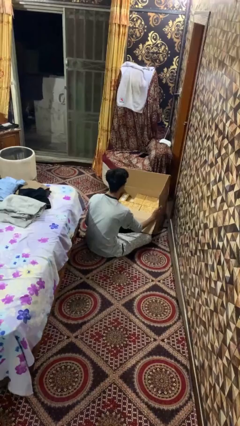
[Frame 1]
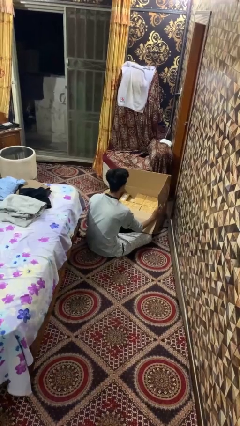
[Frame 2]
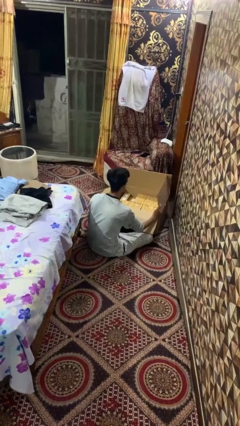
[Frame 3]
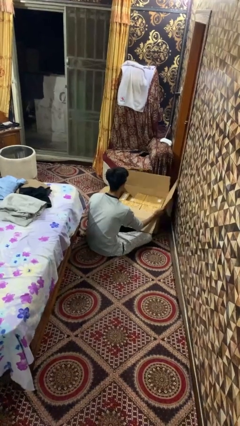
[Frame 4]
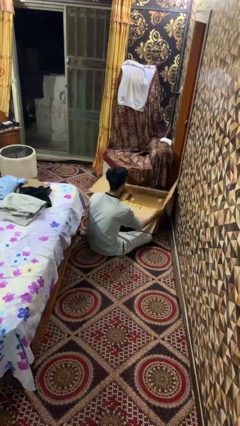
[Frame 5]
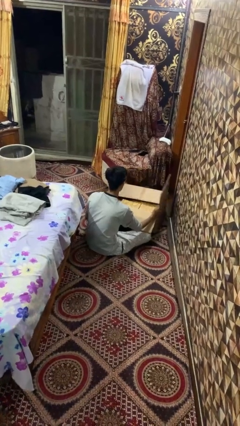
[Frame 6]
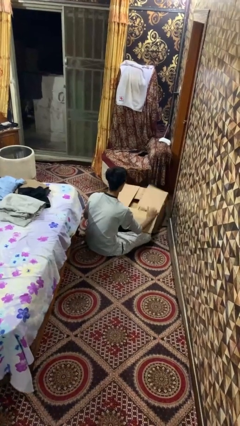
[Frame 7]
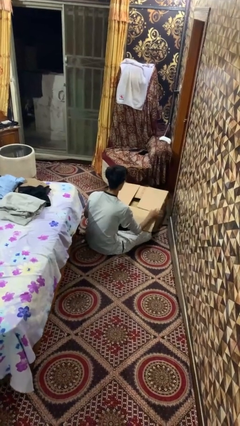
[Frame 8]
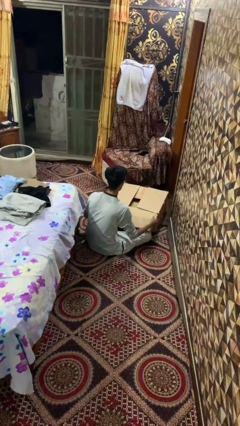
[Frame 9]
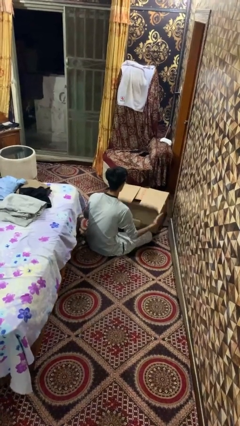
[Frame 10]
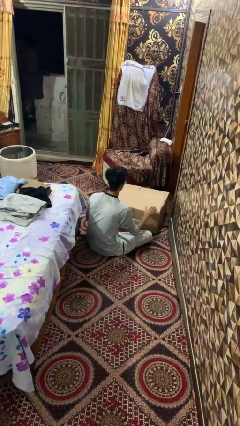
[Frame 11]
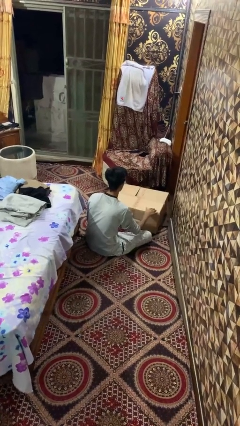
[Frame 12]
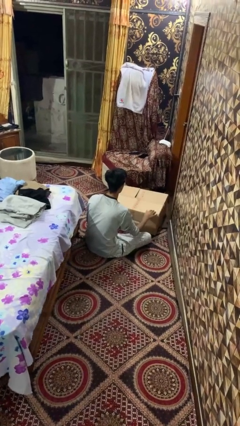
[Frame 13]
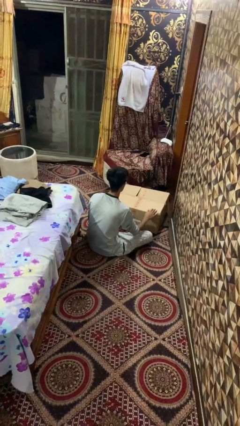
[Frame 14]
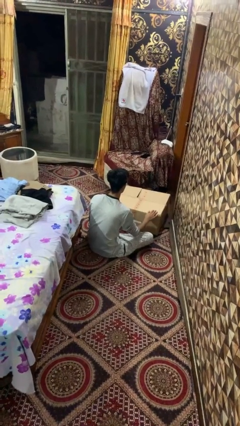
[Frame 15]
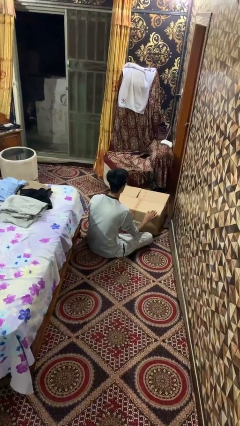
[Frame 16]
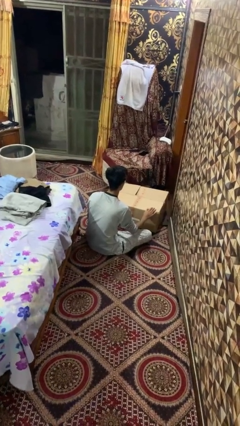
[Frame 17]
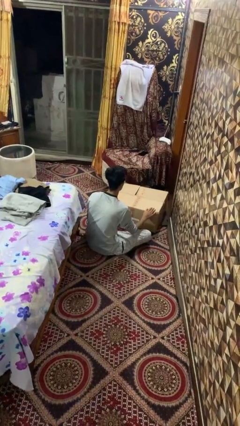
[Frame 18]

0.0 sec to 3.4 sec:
person closes box

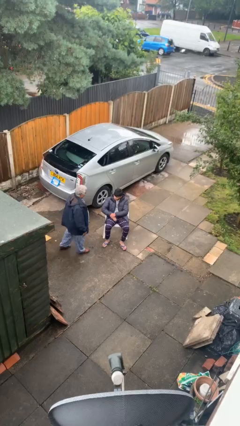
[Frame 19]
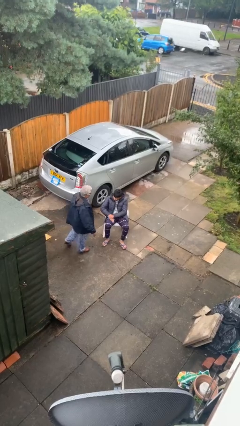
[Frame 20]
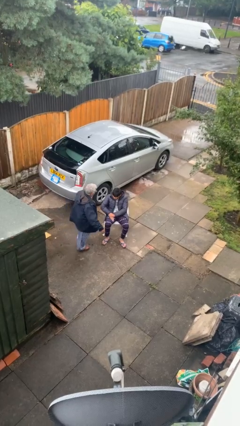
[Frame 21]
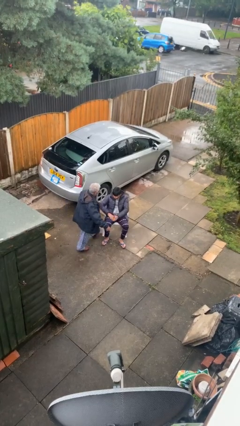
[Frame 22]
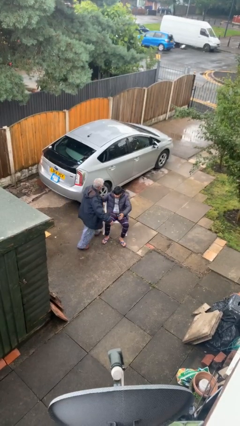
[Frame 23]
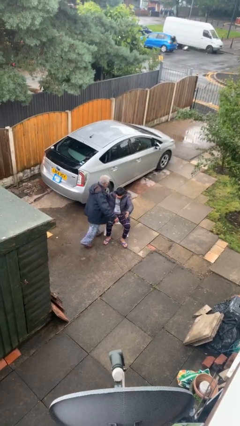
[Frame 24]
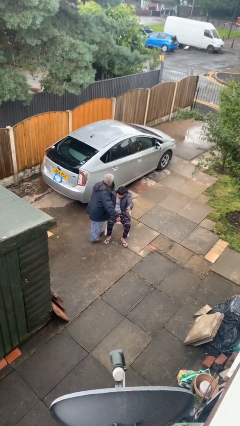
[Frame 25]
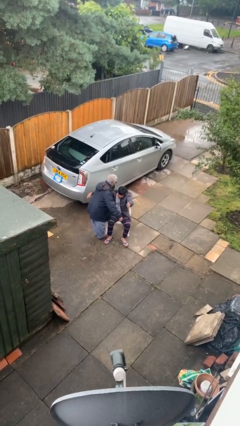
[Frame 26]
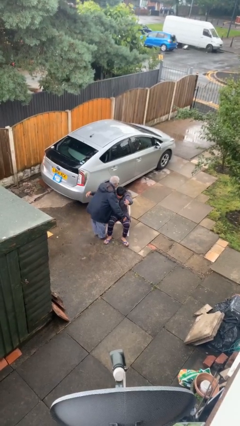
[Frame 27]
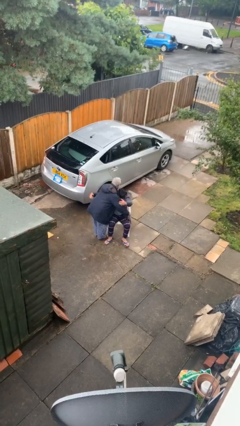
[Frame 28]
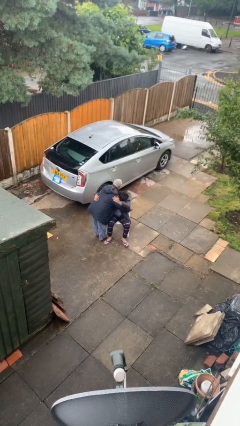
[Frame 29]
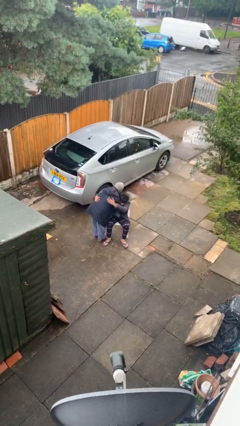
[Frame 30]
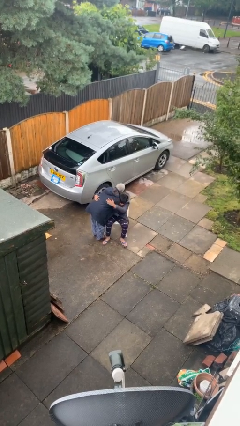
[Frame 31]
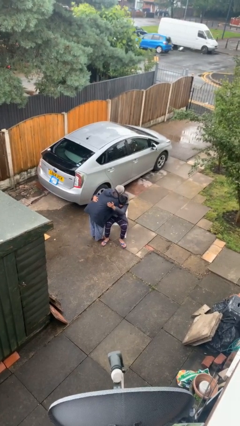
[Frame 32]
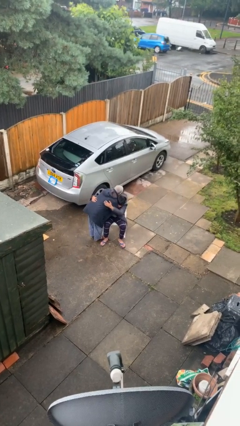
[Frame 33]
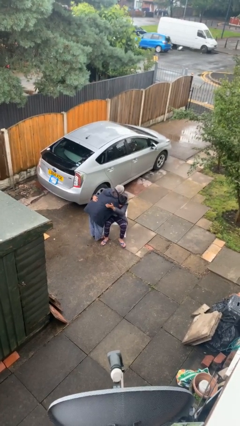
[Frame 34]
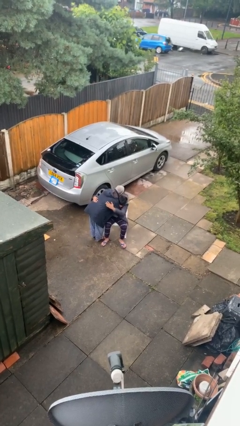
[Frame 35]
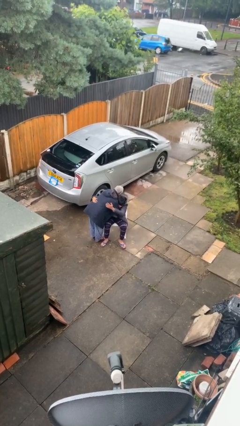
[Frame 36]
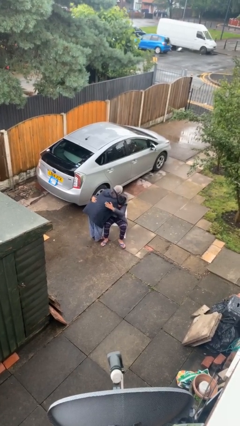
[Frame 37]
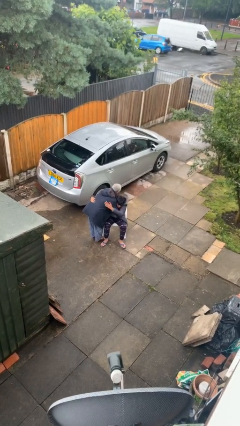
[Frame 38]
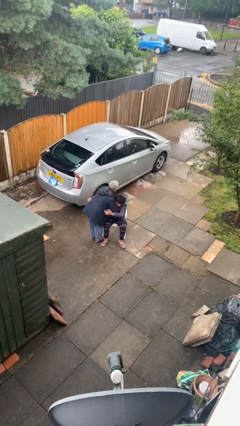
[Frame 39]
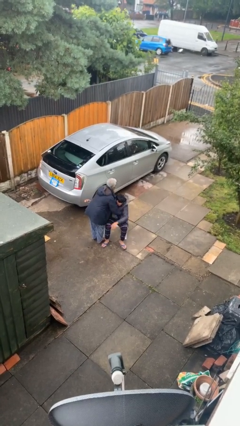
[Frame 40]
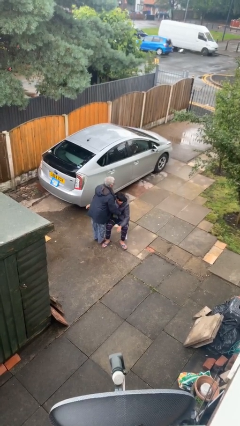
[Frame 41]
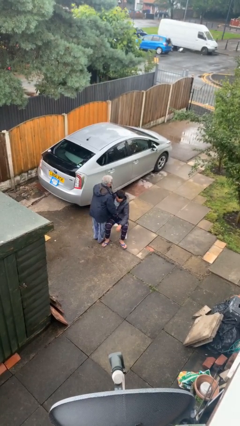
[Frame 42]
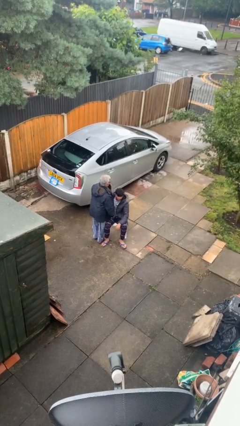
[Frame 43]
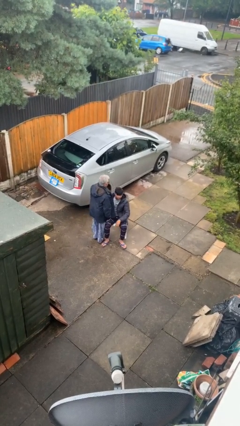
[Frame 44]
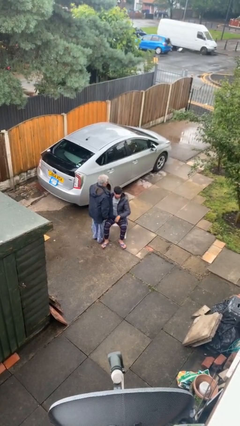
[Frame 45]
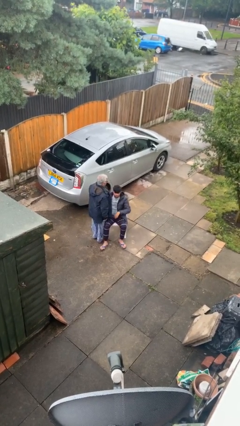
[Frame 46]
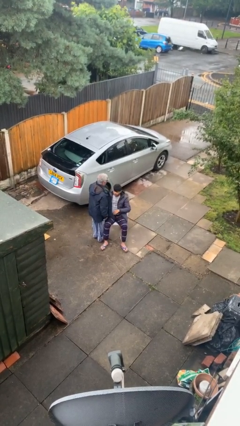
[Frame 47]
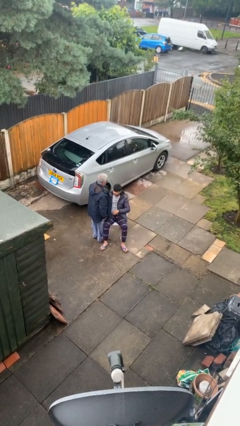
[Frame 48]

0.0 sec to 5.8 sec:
person embraces person

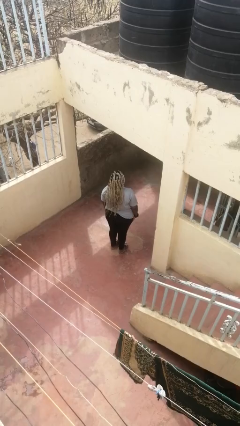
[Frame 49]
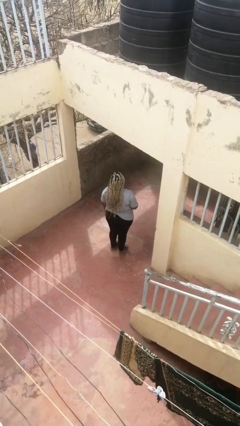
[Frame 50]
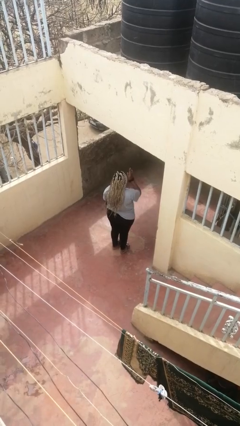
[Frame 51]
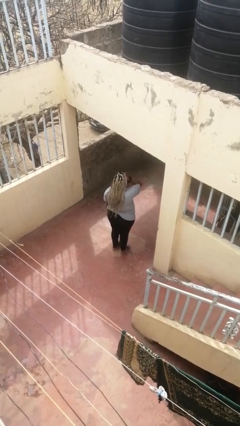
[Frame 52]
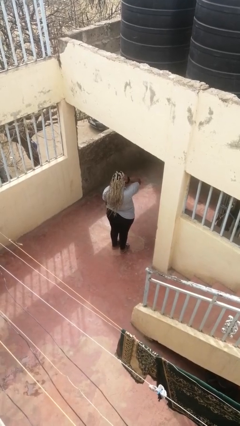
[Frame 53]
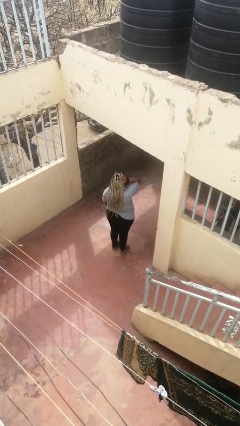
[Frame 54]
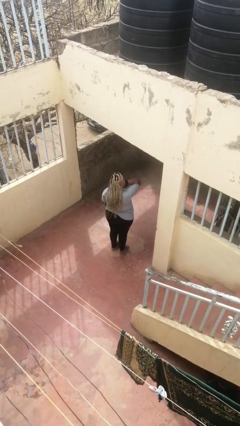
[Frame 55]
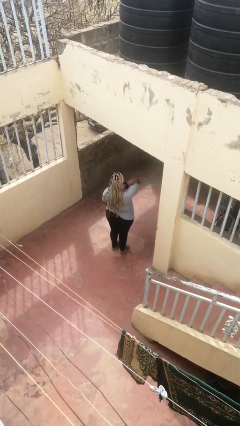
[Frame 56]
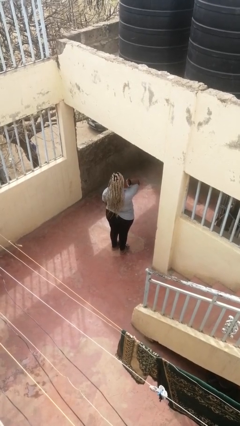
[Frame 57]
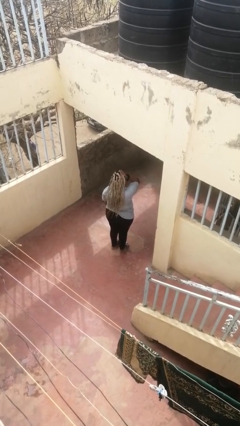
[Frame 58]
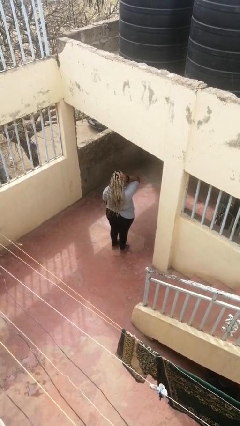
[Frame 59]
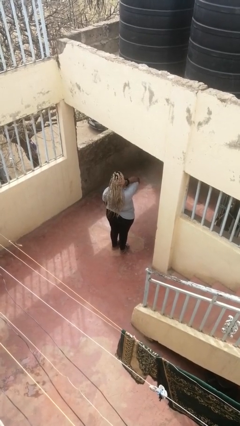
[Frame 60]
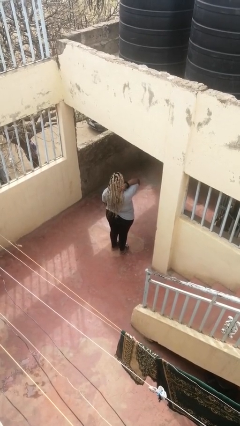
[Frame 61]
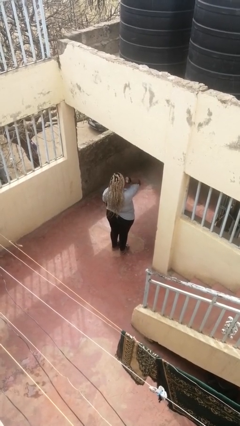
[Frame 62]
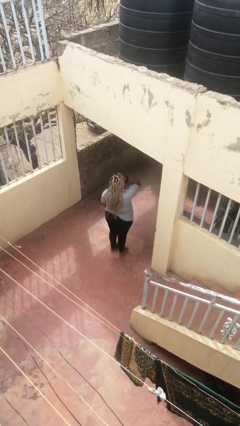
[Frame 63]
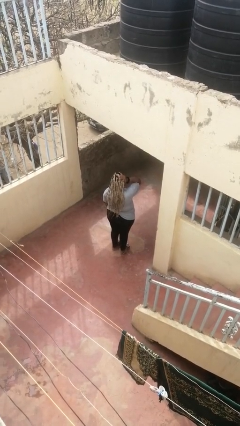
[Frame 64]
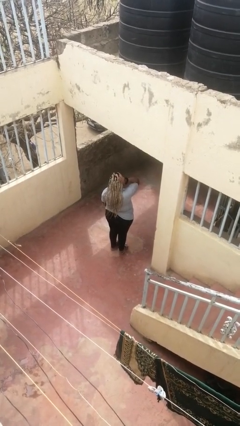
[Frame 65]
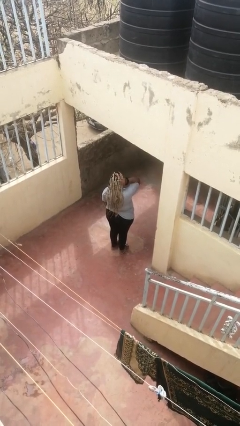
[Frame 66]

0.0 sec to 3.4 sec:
person strokes hair

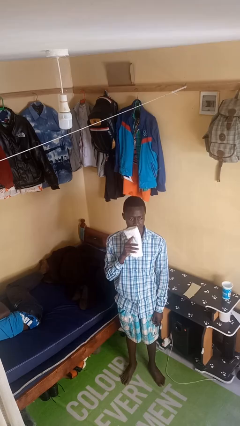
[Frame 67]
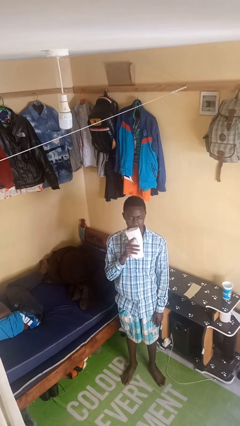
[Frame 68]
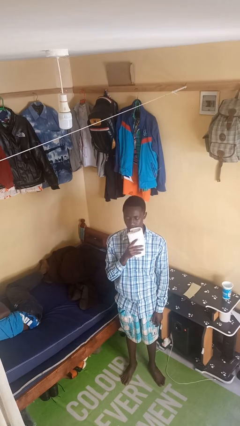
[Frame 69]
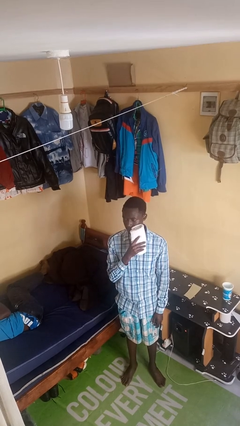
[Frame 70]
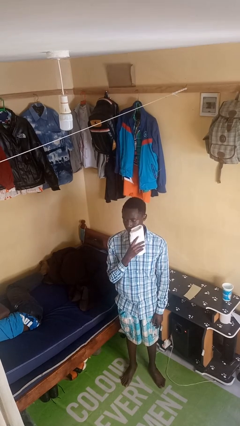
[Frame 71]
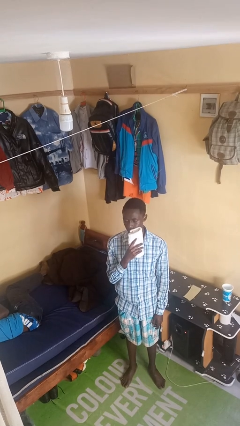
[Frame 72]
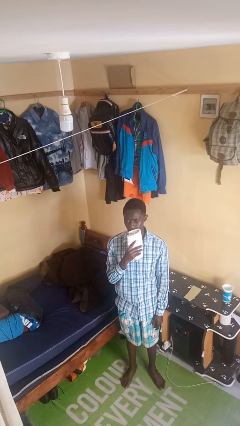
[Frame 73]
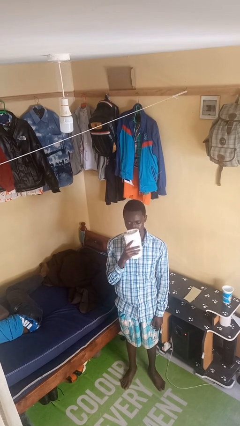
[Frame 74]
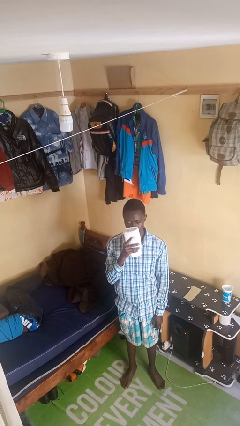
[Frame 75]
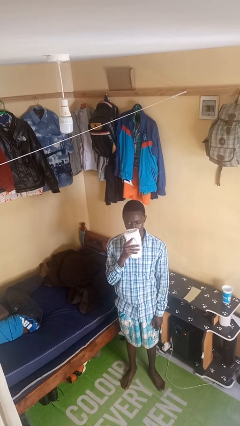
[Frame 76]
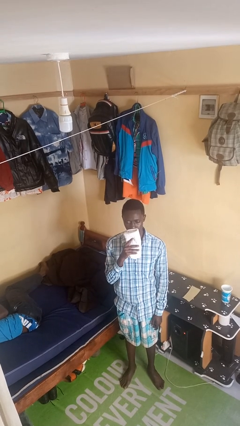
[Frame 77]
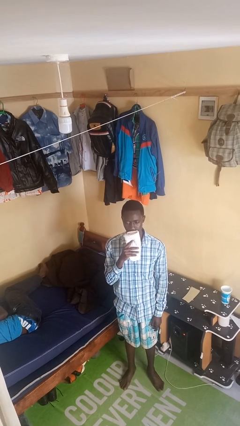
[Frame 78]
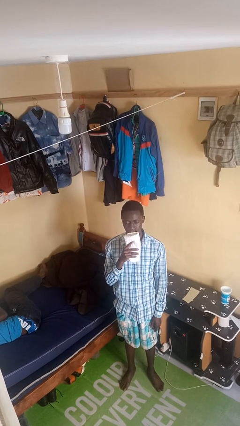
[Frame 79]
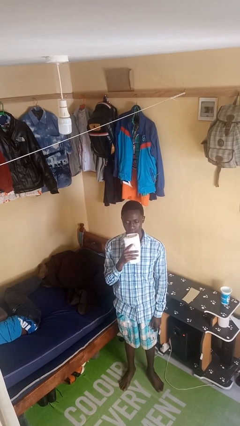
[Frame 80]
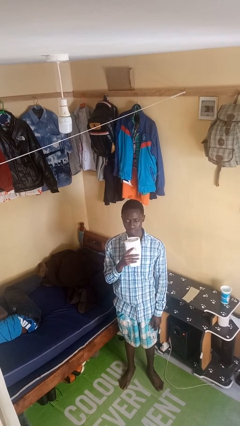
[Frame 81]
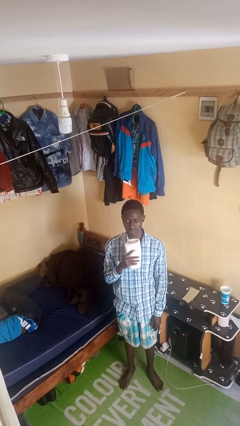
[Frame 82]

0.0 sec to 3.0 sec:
person wipes mouth with napkin

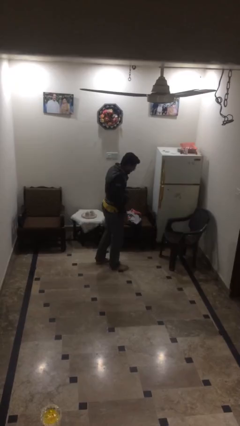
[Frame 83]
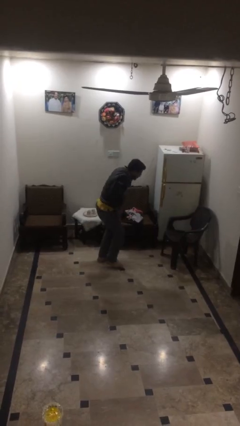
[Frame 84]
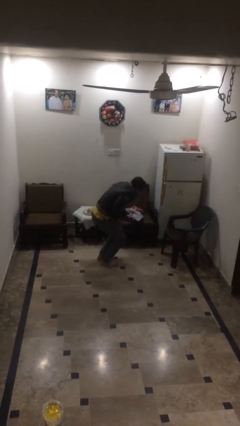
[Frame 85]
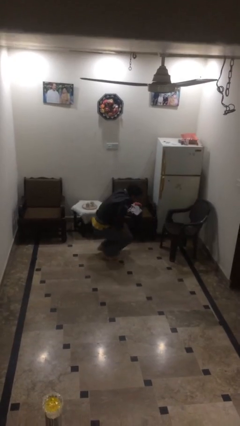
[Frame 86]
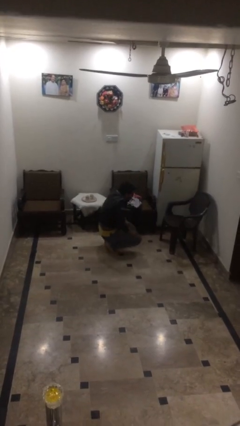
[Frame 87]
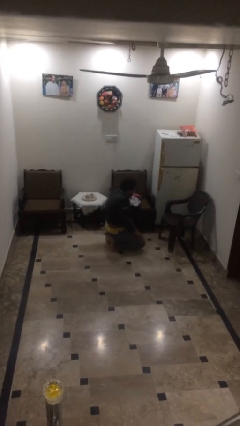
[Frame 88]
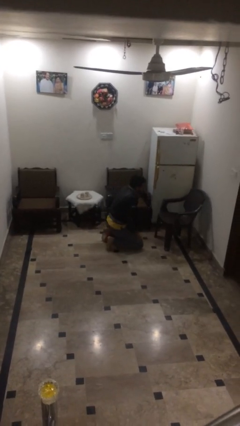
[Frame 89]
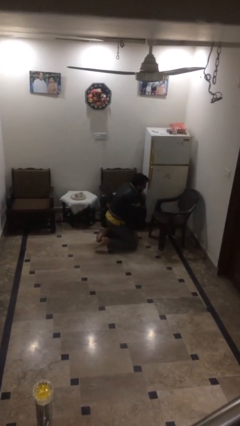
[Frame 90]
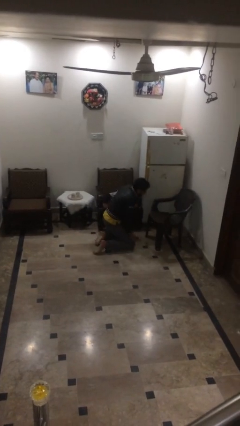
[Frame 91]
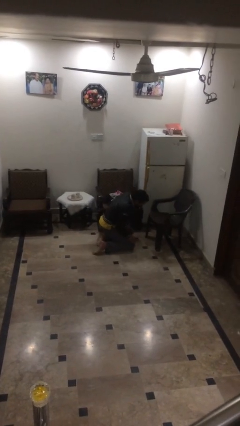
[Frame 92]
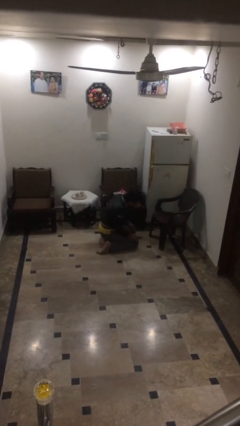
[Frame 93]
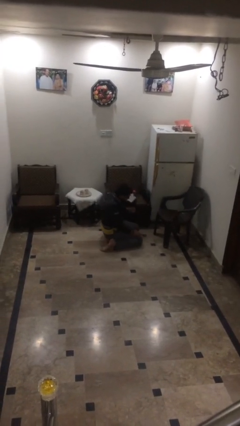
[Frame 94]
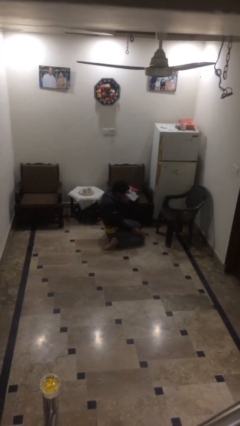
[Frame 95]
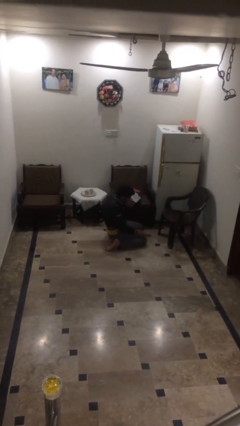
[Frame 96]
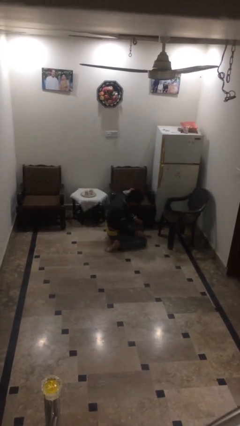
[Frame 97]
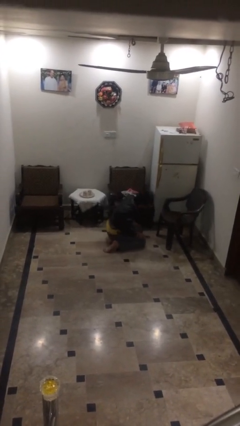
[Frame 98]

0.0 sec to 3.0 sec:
person sits down
